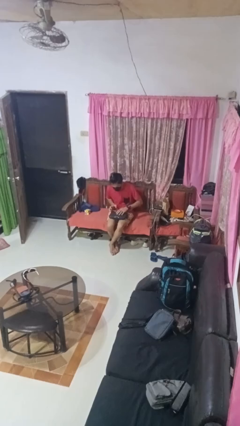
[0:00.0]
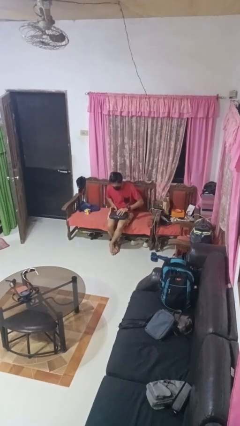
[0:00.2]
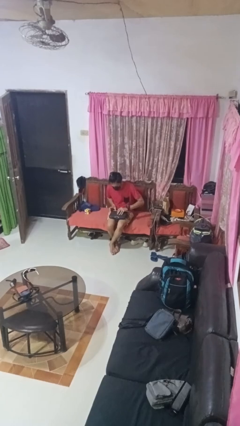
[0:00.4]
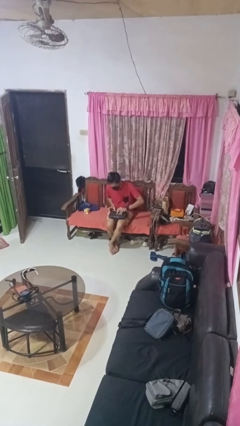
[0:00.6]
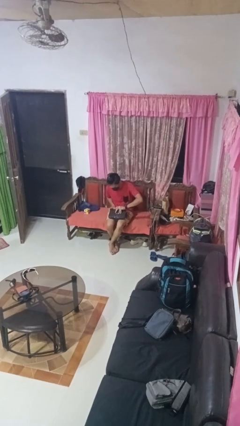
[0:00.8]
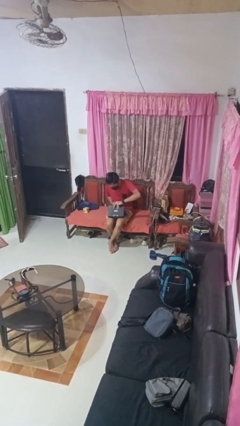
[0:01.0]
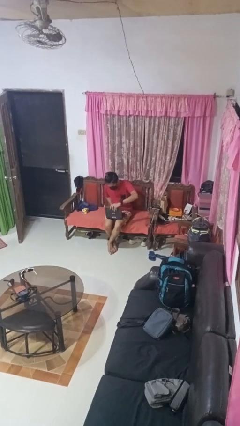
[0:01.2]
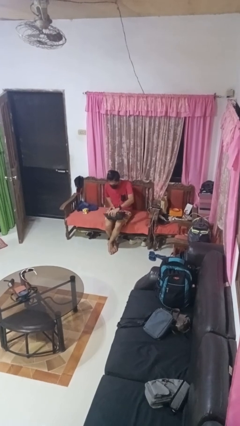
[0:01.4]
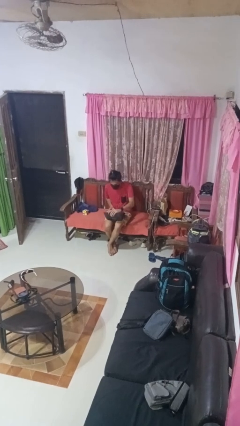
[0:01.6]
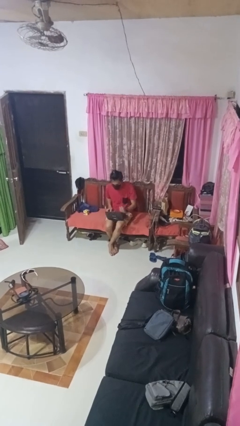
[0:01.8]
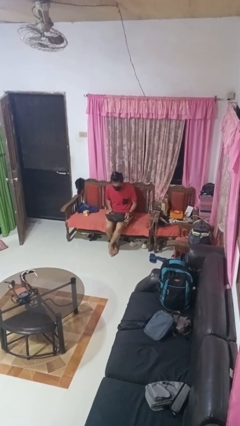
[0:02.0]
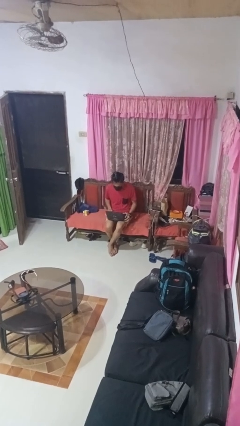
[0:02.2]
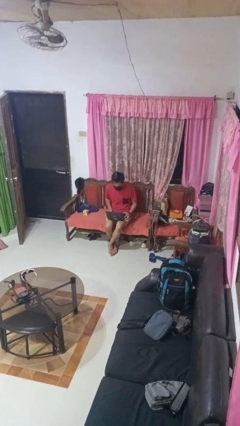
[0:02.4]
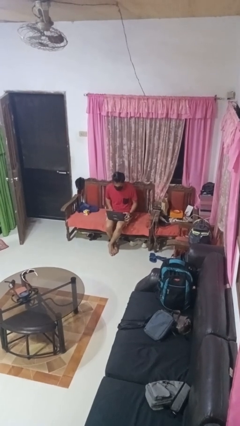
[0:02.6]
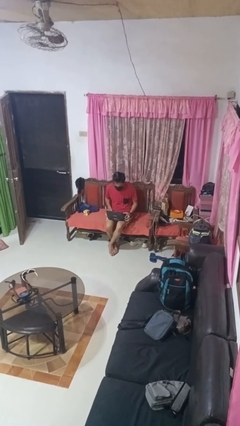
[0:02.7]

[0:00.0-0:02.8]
person opens laptop

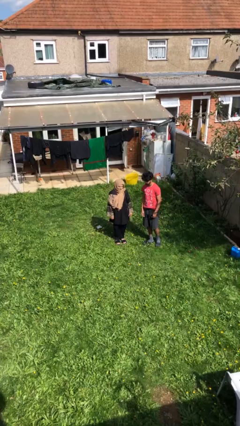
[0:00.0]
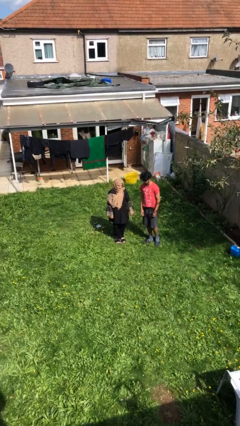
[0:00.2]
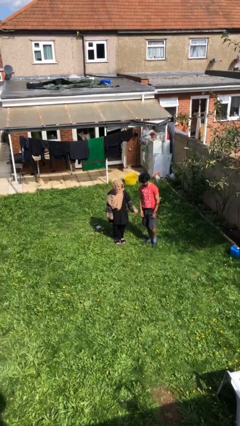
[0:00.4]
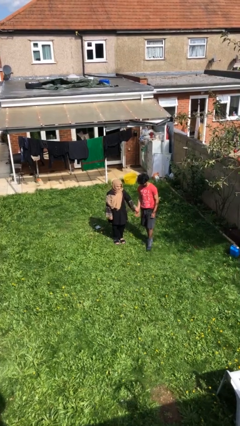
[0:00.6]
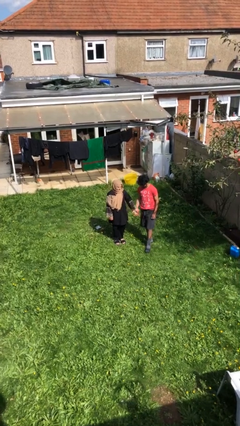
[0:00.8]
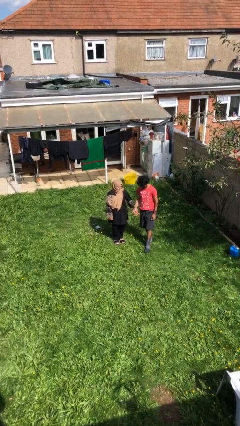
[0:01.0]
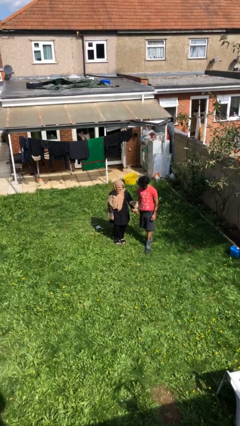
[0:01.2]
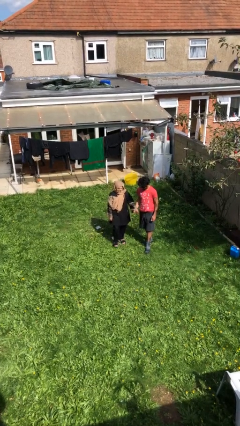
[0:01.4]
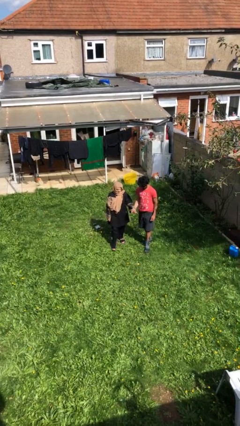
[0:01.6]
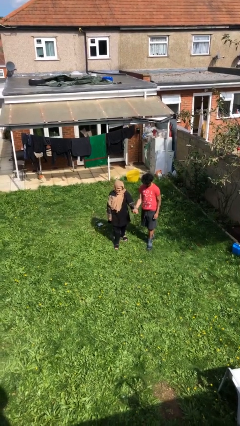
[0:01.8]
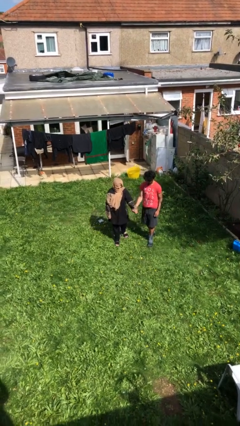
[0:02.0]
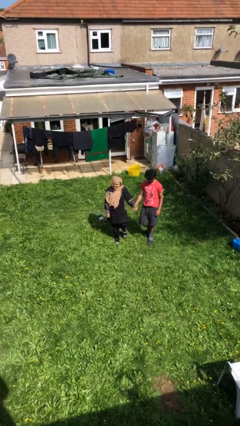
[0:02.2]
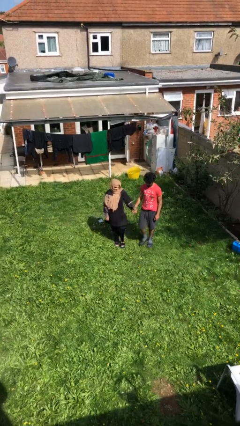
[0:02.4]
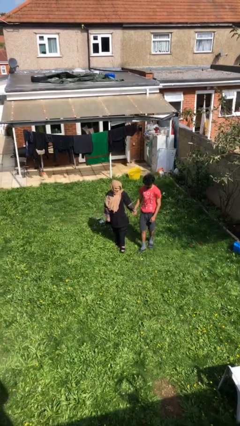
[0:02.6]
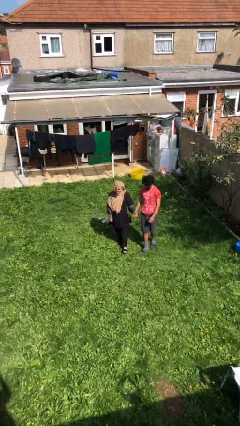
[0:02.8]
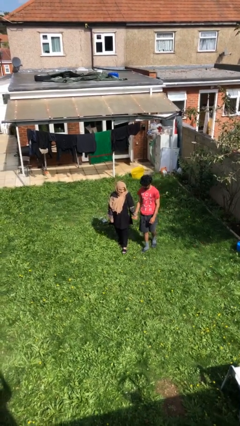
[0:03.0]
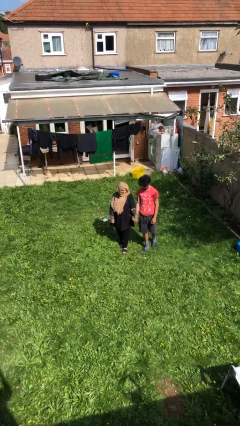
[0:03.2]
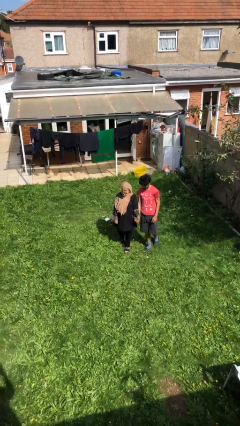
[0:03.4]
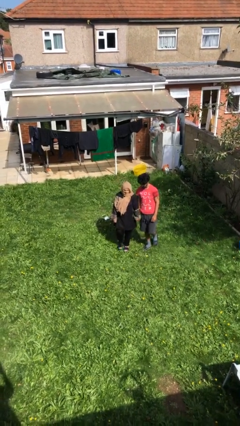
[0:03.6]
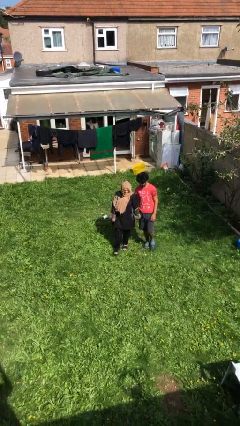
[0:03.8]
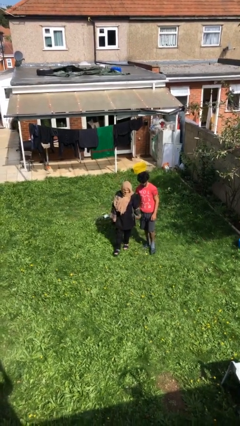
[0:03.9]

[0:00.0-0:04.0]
person holds hand

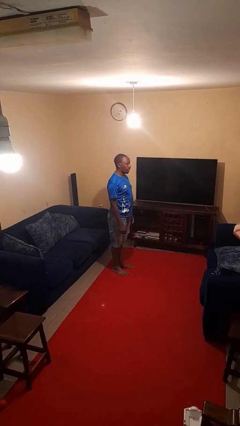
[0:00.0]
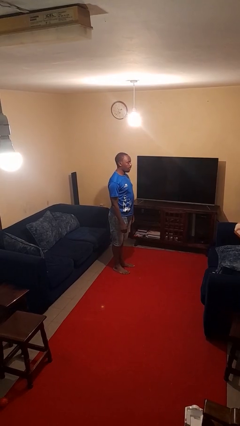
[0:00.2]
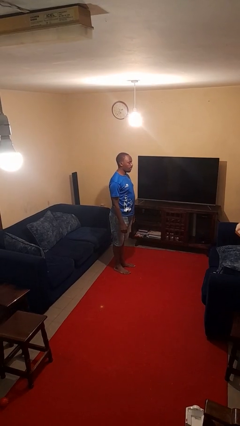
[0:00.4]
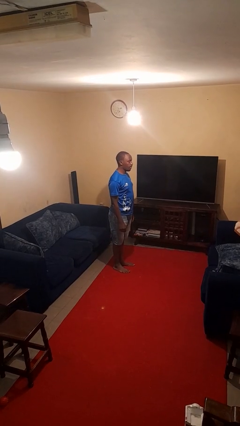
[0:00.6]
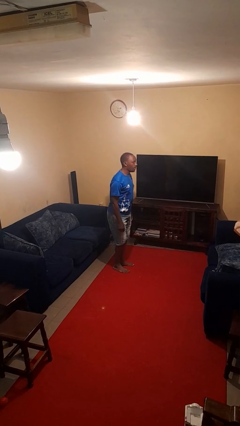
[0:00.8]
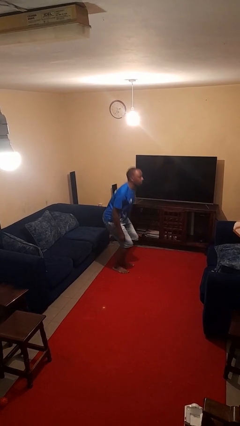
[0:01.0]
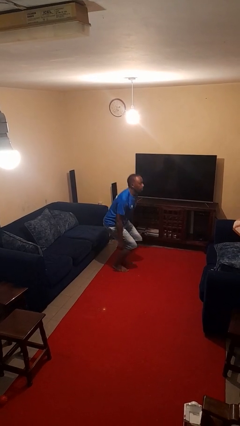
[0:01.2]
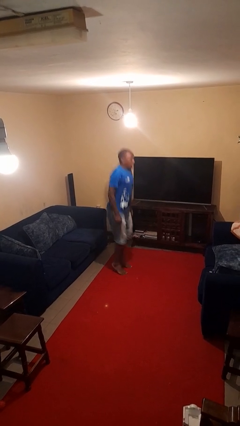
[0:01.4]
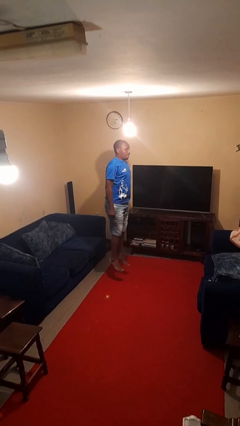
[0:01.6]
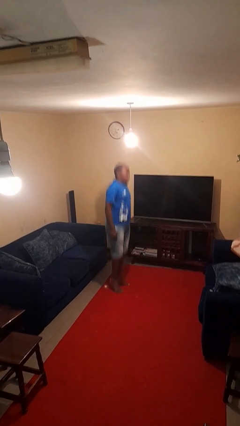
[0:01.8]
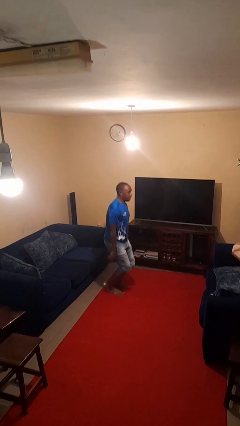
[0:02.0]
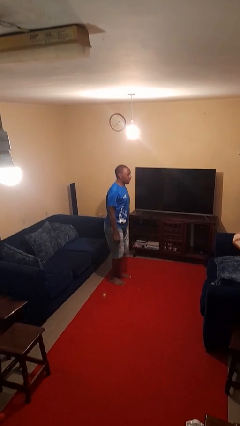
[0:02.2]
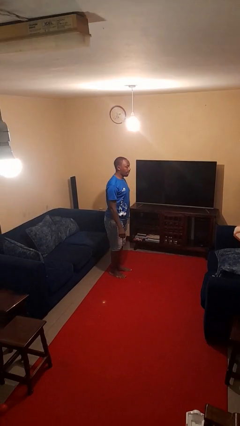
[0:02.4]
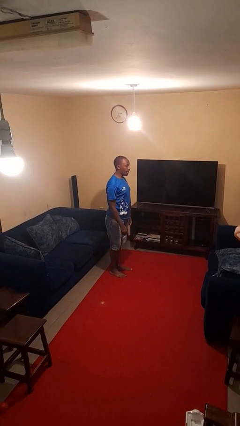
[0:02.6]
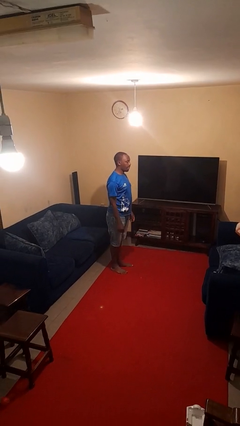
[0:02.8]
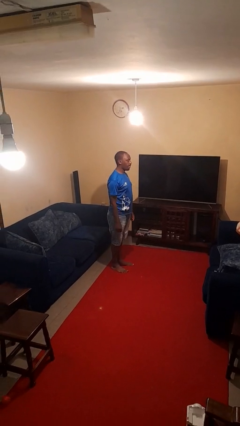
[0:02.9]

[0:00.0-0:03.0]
person jumps

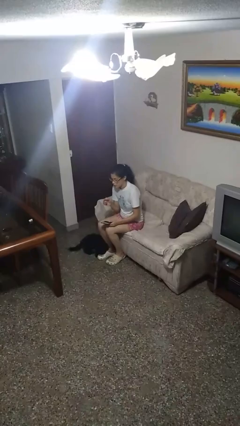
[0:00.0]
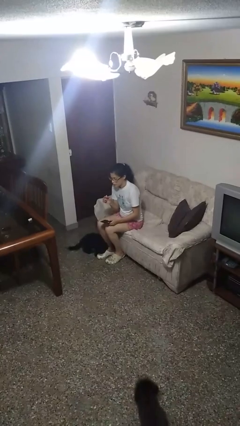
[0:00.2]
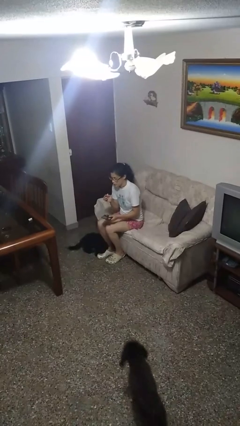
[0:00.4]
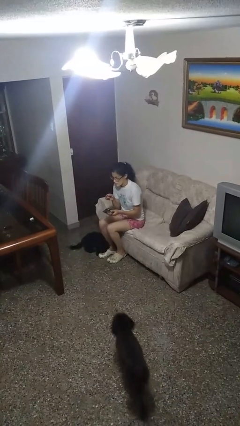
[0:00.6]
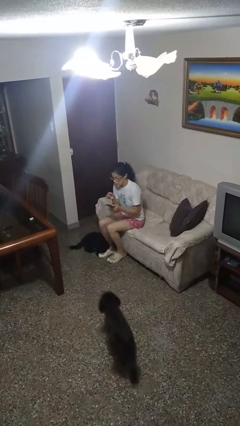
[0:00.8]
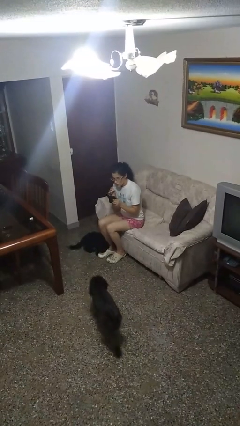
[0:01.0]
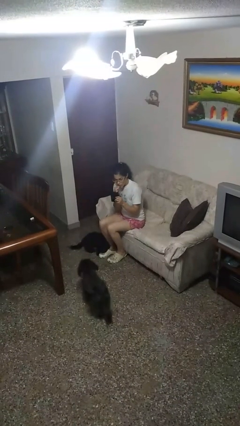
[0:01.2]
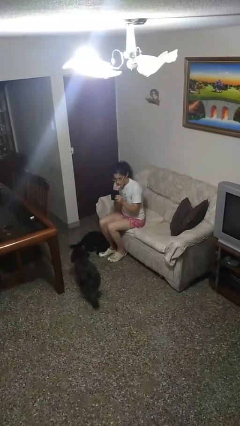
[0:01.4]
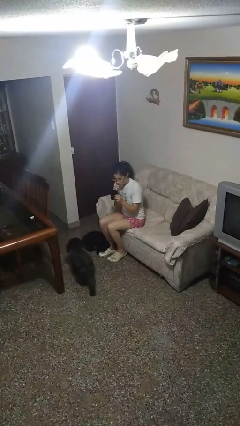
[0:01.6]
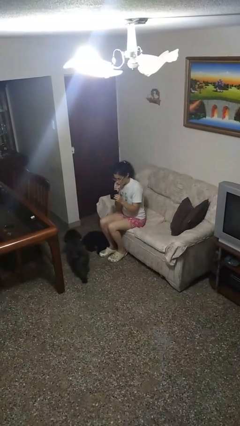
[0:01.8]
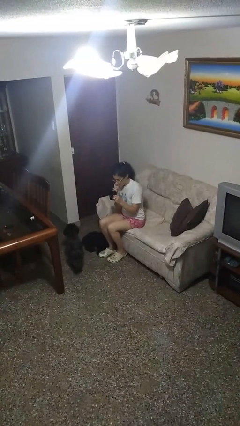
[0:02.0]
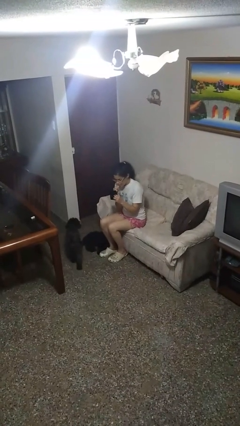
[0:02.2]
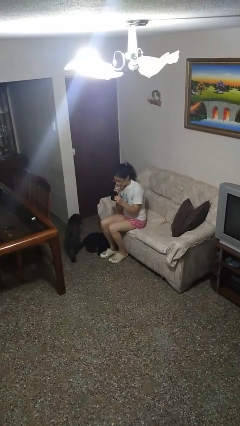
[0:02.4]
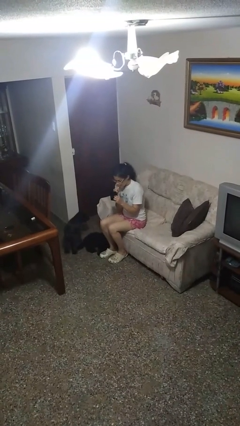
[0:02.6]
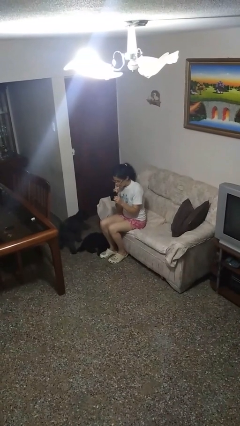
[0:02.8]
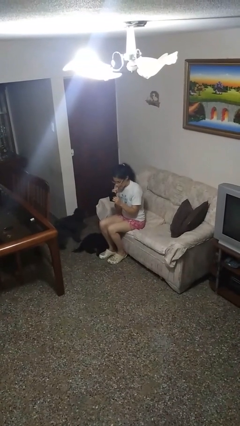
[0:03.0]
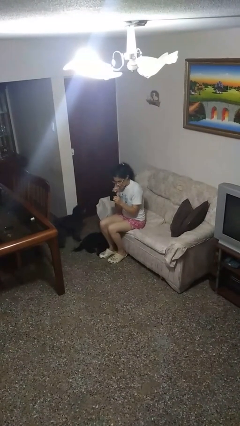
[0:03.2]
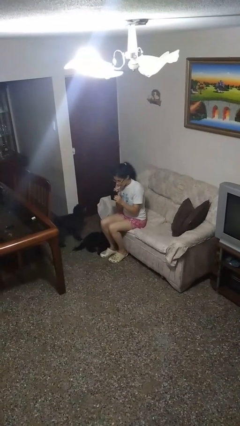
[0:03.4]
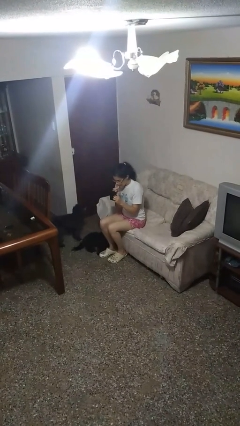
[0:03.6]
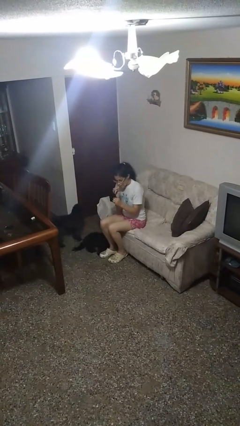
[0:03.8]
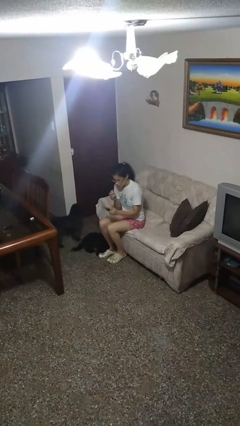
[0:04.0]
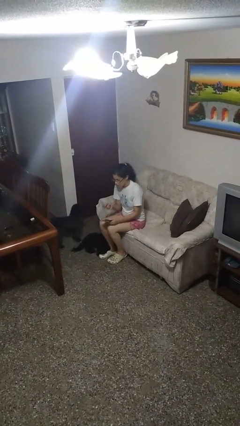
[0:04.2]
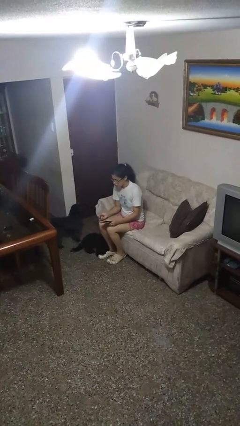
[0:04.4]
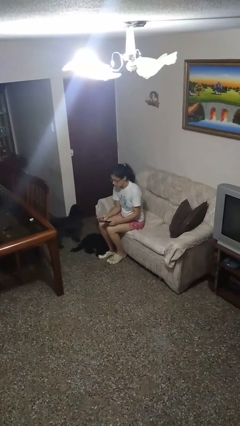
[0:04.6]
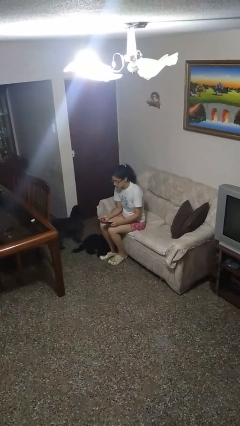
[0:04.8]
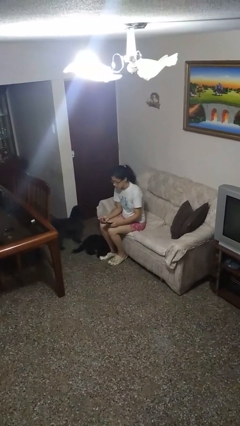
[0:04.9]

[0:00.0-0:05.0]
person applies lip makeup

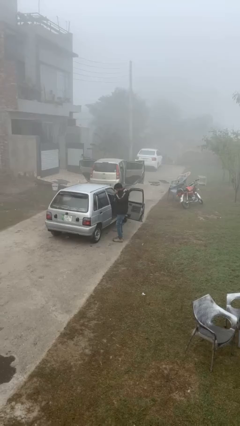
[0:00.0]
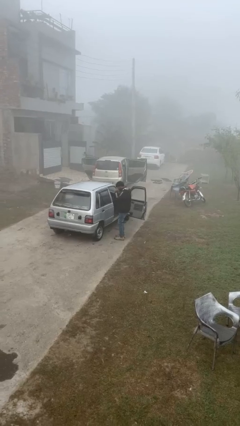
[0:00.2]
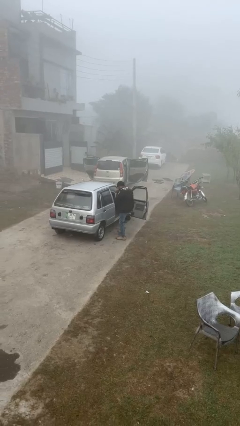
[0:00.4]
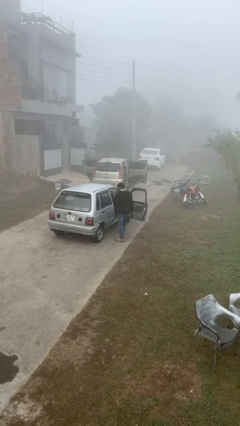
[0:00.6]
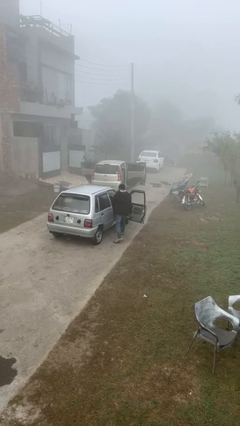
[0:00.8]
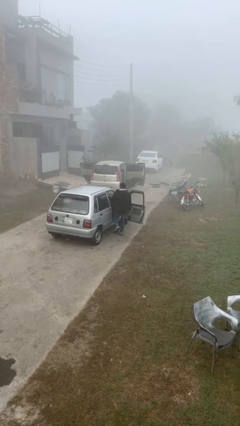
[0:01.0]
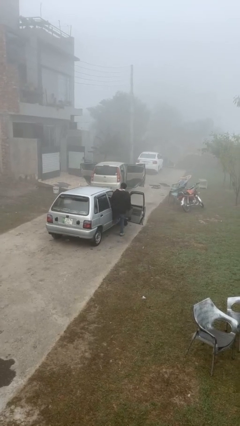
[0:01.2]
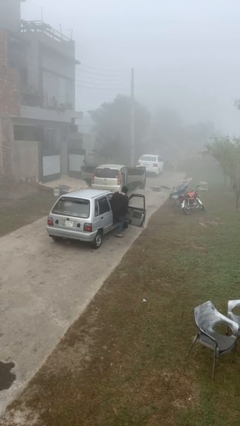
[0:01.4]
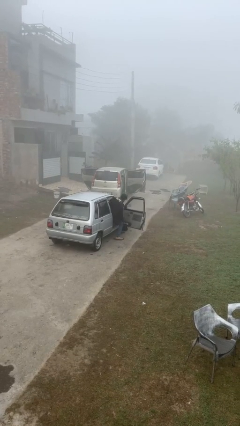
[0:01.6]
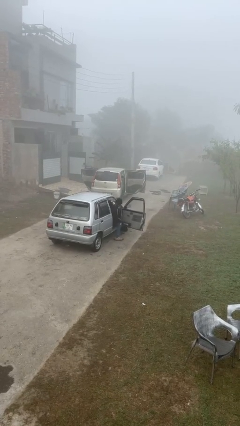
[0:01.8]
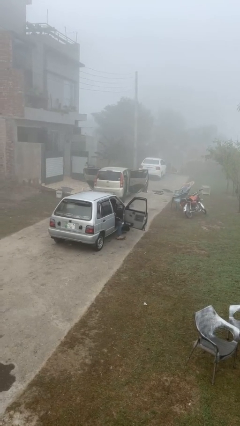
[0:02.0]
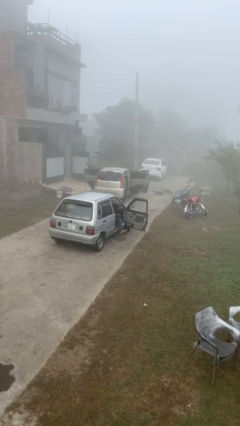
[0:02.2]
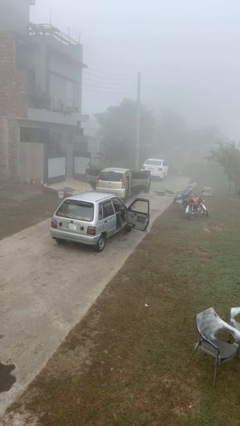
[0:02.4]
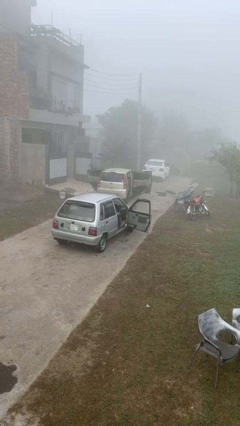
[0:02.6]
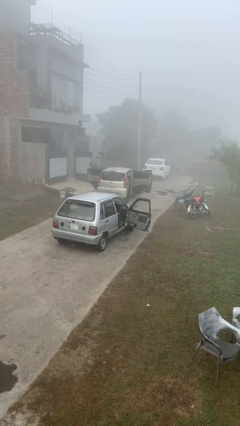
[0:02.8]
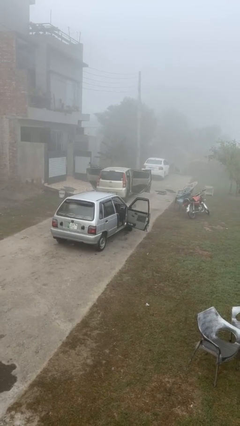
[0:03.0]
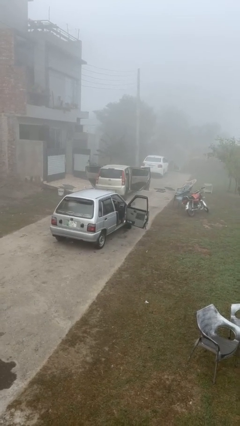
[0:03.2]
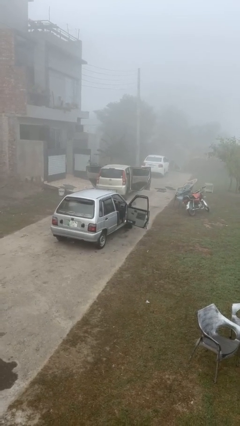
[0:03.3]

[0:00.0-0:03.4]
person enters car
